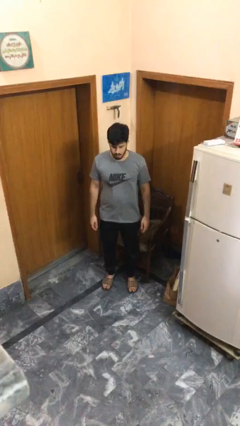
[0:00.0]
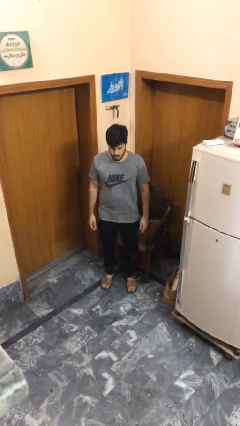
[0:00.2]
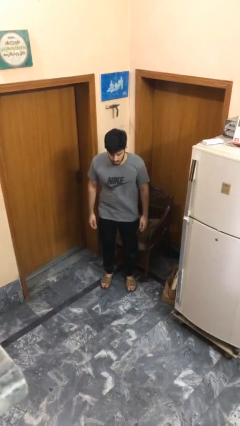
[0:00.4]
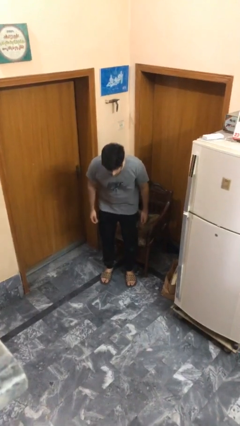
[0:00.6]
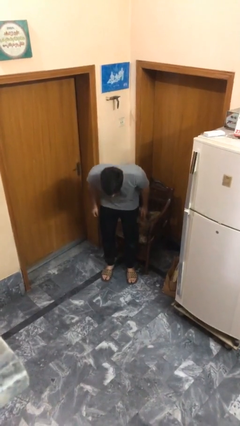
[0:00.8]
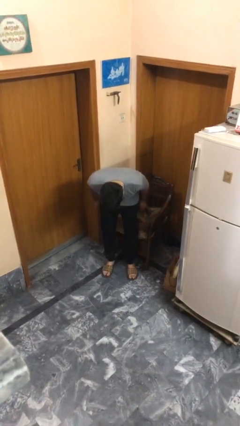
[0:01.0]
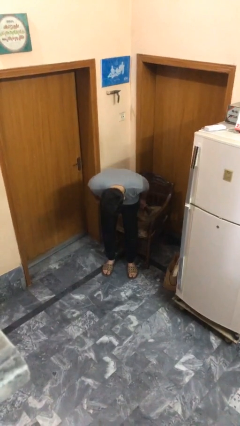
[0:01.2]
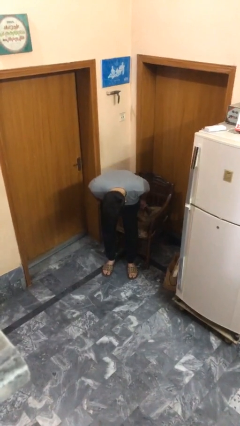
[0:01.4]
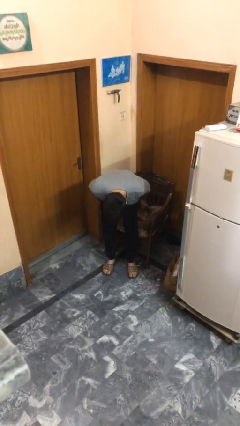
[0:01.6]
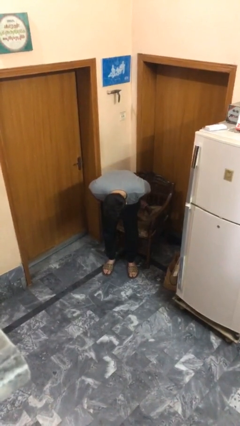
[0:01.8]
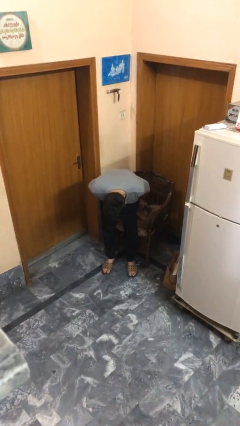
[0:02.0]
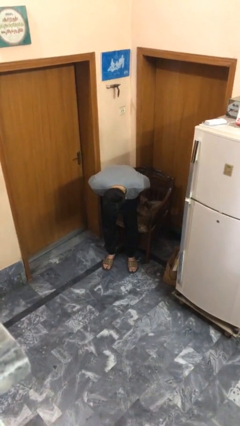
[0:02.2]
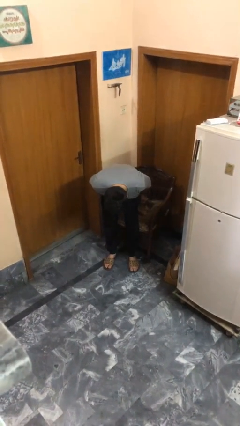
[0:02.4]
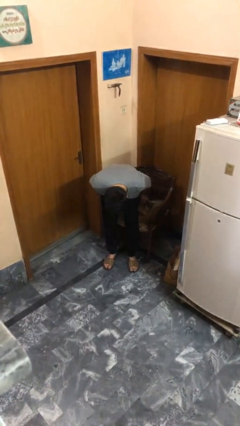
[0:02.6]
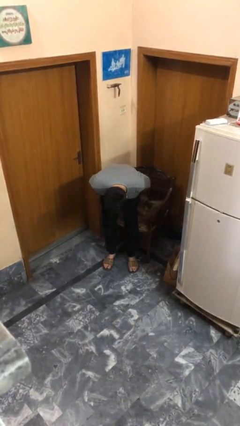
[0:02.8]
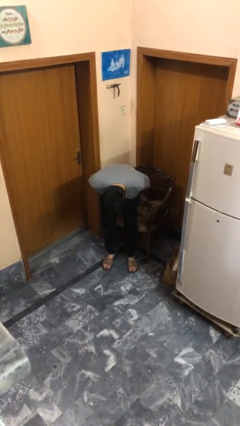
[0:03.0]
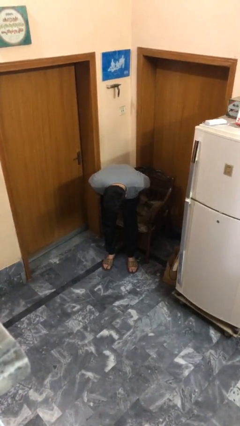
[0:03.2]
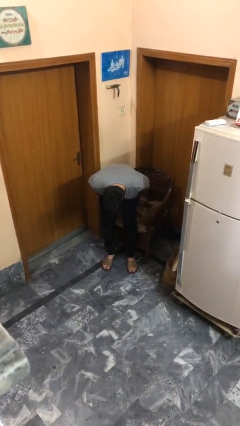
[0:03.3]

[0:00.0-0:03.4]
person bows

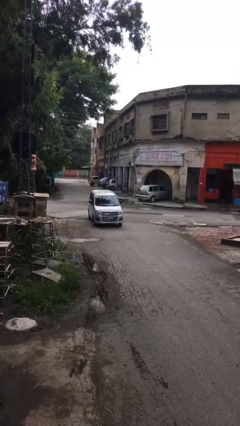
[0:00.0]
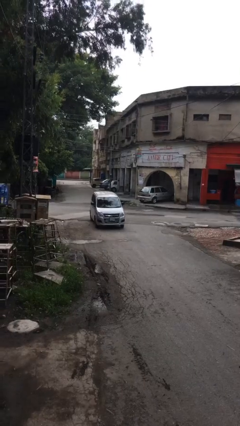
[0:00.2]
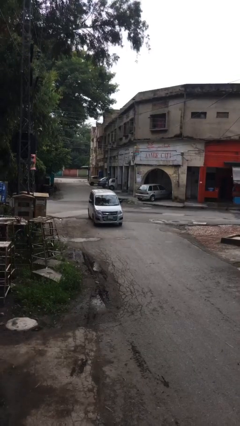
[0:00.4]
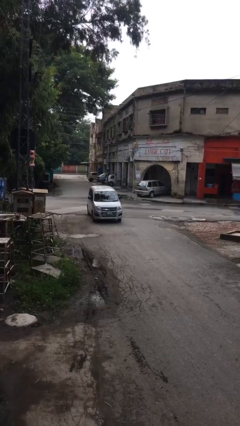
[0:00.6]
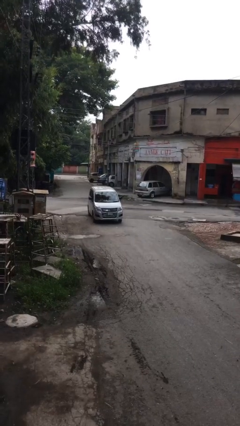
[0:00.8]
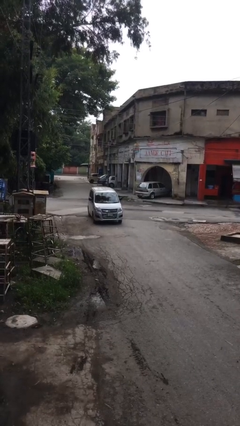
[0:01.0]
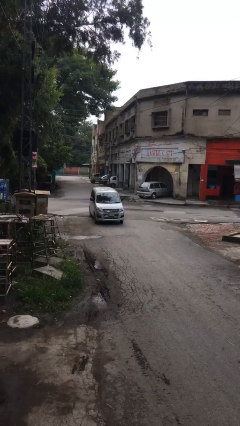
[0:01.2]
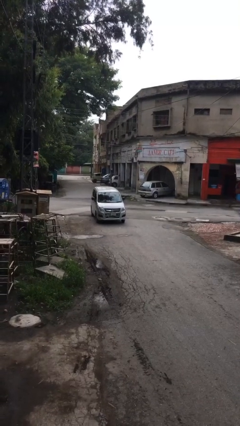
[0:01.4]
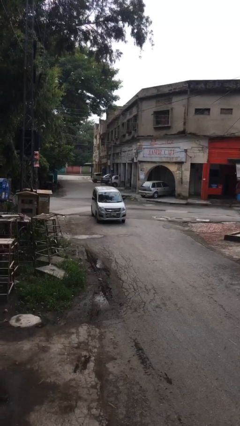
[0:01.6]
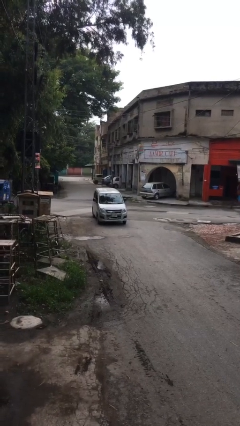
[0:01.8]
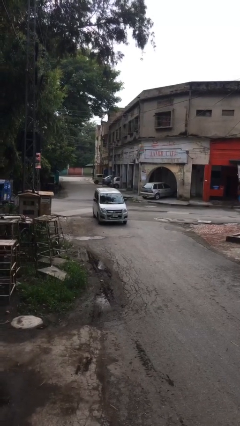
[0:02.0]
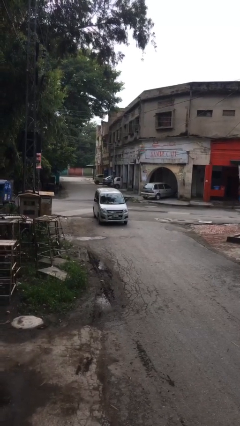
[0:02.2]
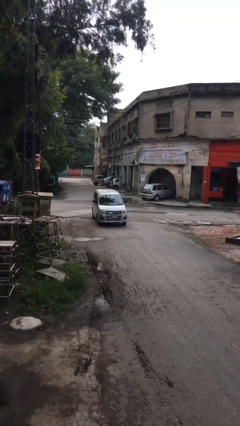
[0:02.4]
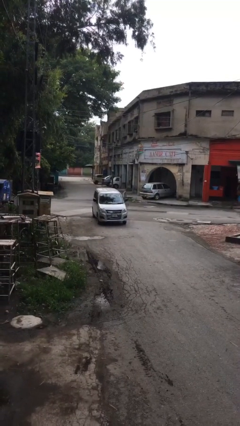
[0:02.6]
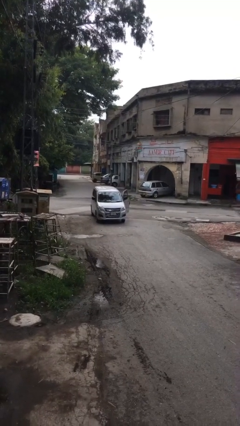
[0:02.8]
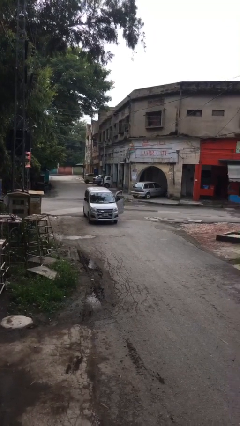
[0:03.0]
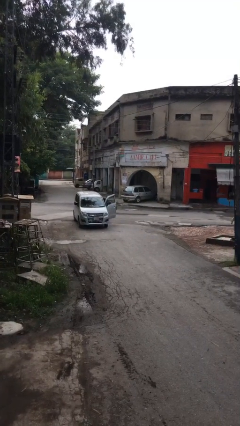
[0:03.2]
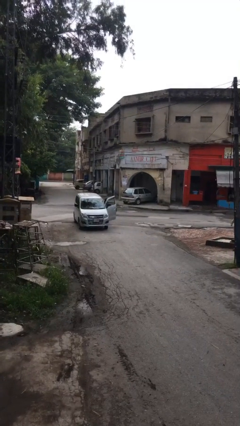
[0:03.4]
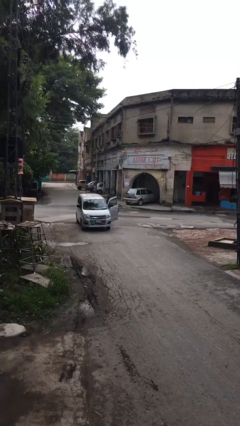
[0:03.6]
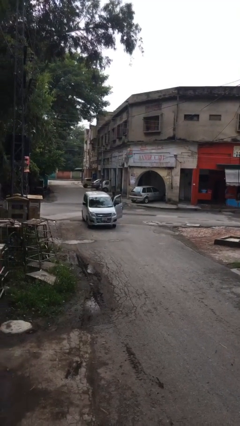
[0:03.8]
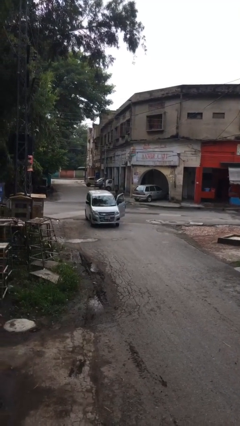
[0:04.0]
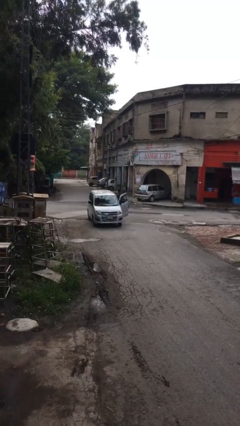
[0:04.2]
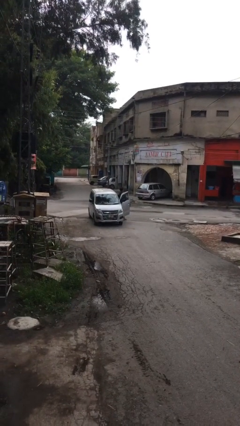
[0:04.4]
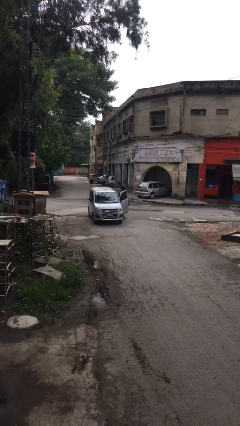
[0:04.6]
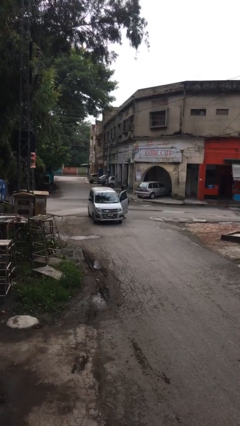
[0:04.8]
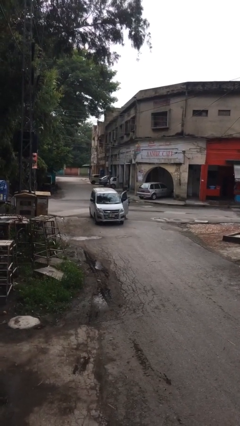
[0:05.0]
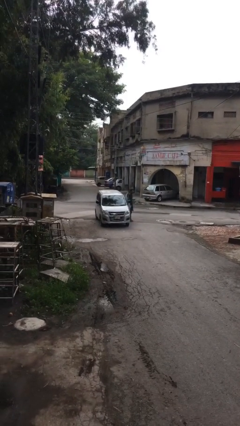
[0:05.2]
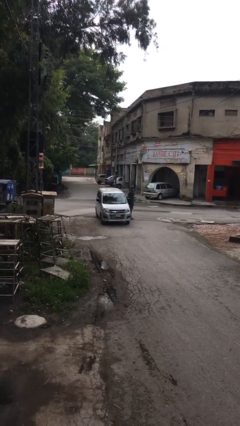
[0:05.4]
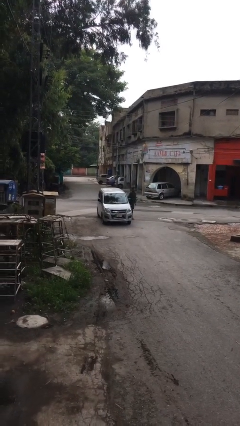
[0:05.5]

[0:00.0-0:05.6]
car drops off person

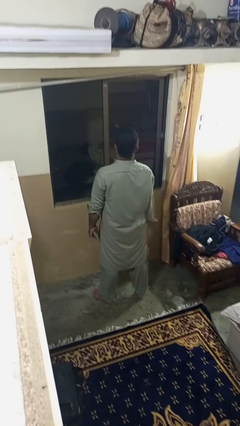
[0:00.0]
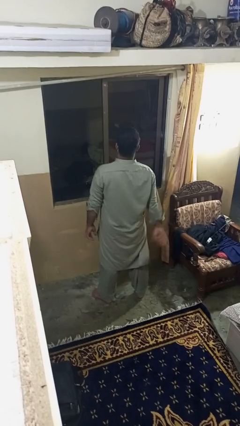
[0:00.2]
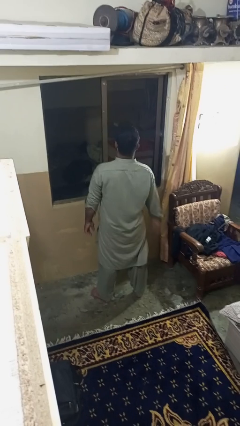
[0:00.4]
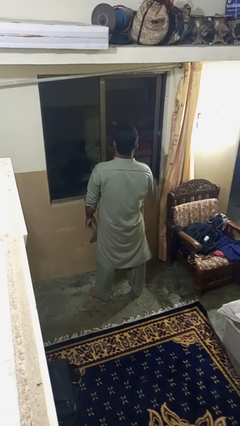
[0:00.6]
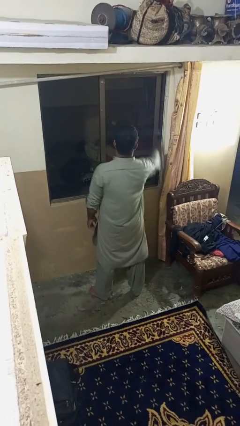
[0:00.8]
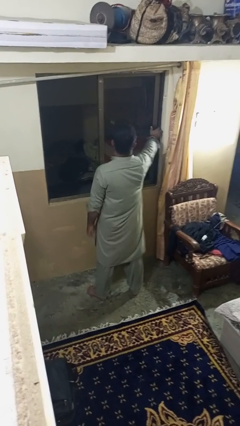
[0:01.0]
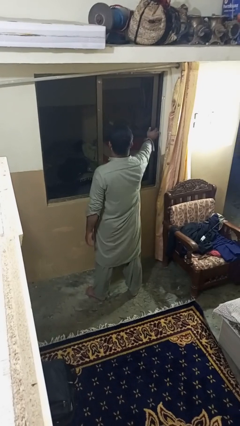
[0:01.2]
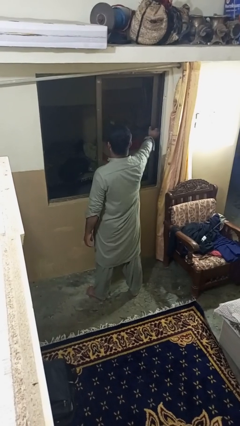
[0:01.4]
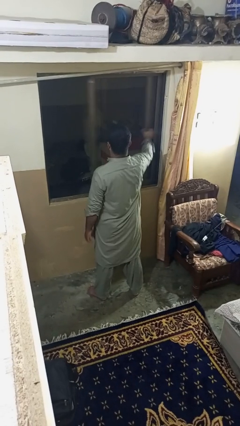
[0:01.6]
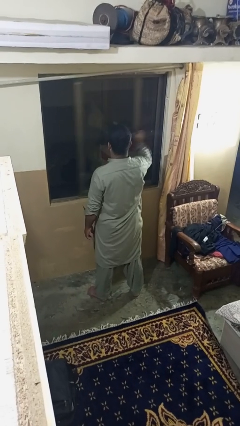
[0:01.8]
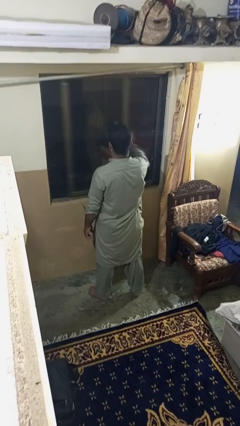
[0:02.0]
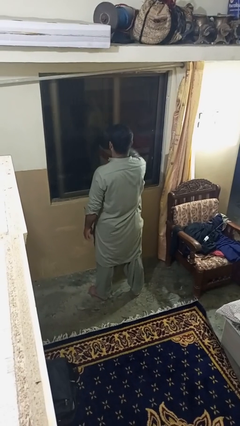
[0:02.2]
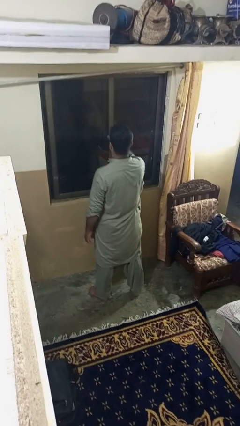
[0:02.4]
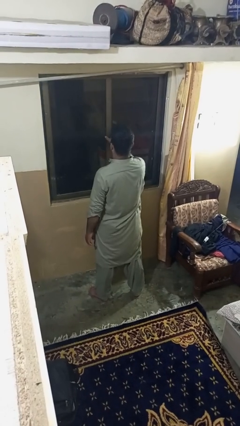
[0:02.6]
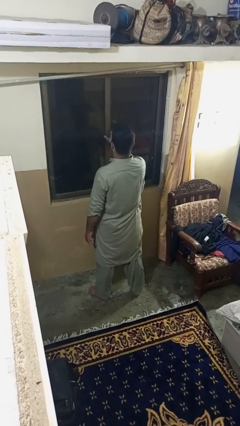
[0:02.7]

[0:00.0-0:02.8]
person closes home window

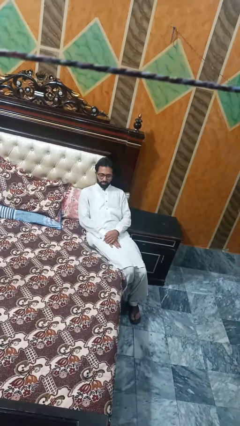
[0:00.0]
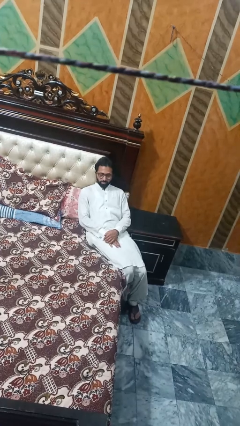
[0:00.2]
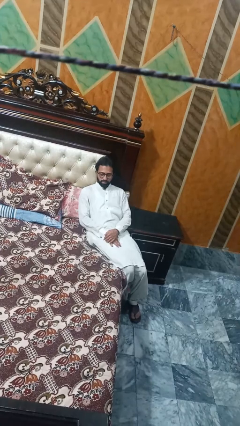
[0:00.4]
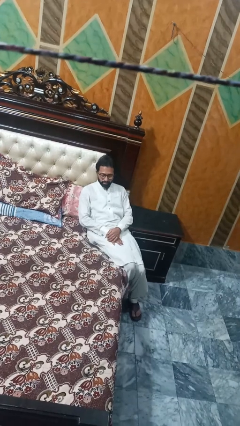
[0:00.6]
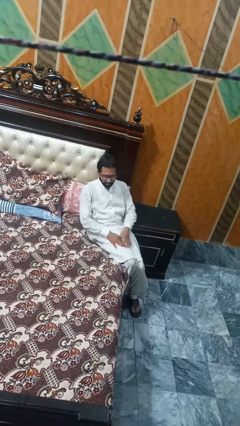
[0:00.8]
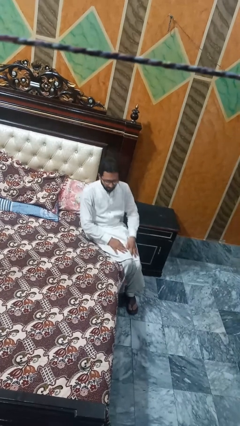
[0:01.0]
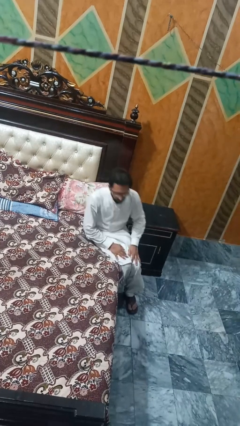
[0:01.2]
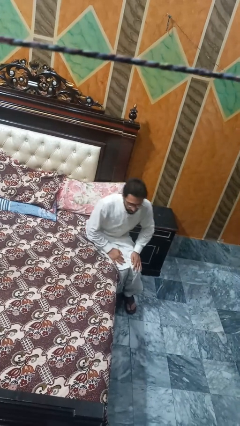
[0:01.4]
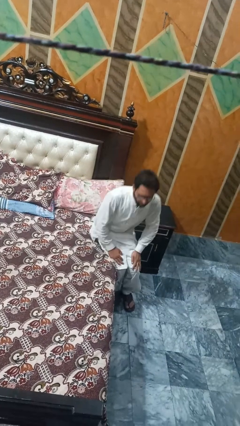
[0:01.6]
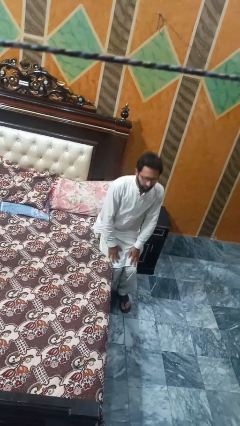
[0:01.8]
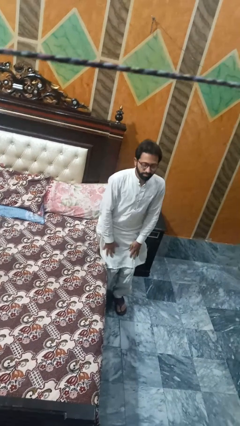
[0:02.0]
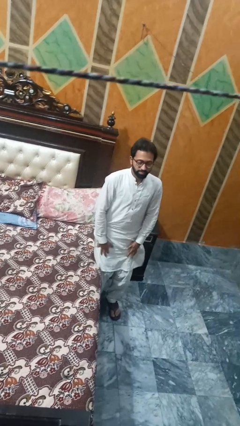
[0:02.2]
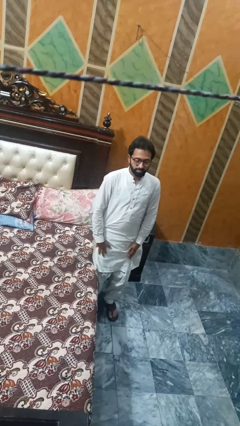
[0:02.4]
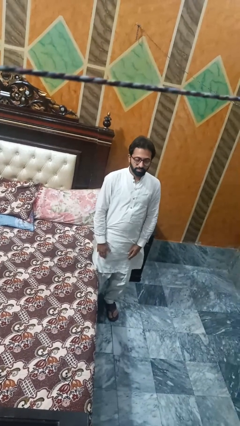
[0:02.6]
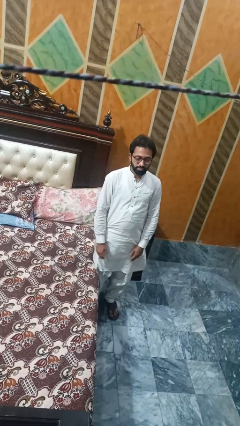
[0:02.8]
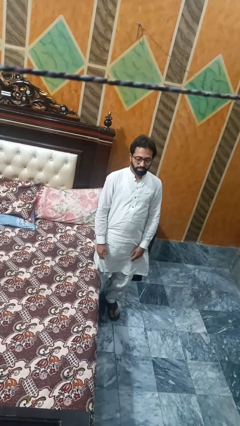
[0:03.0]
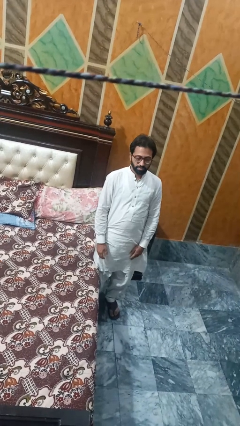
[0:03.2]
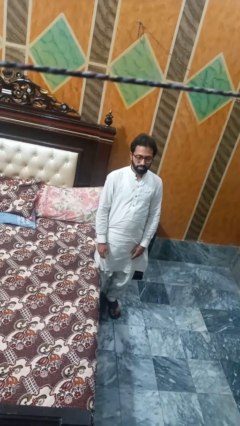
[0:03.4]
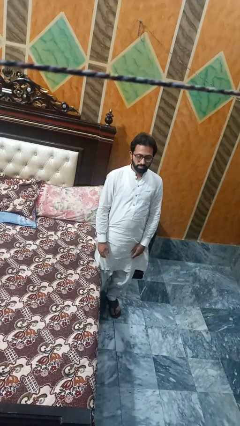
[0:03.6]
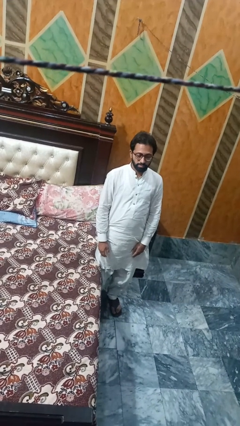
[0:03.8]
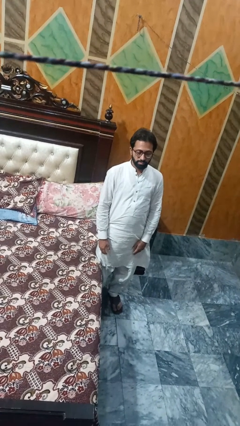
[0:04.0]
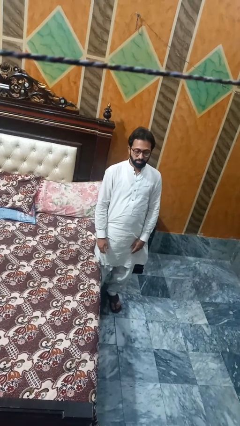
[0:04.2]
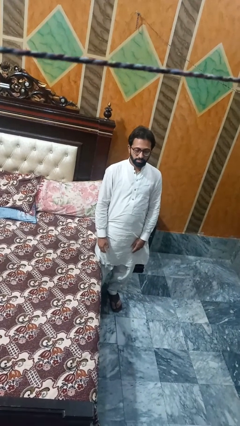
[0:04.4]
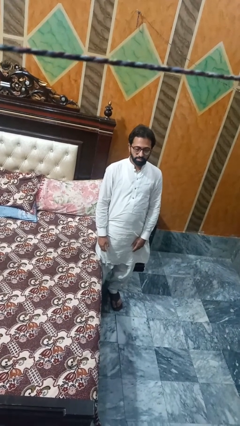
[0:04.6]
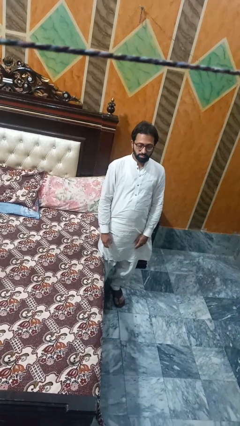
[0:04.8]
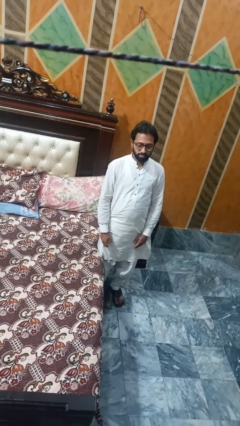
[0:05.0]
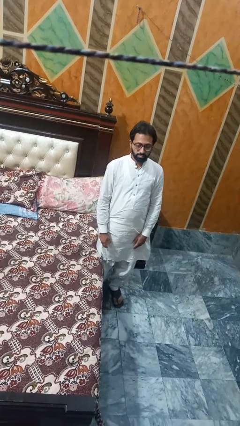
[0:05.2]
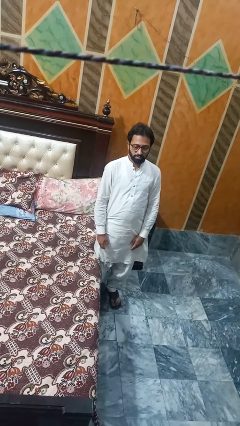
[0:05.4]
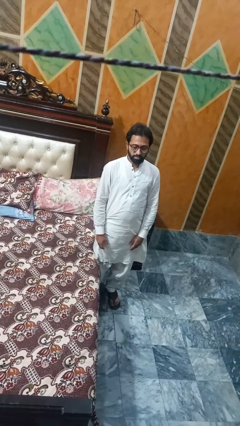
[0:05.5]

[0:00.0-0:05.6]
person stands up
